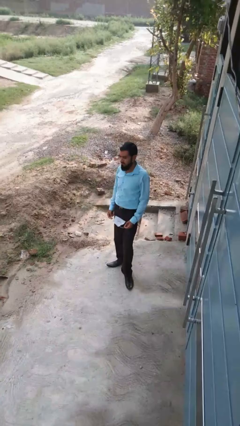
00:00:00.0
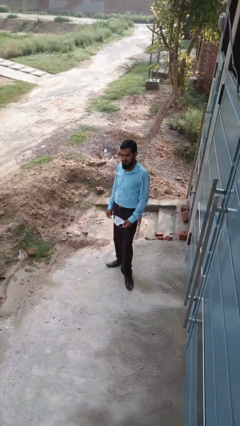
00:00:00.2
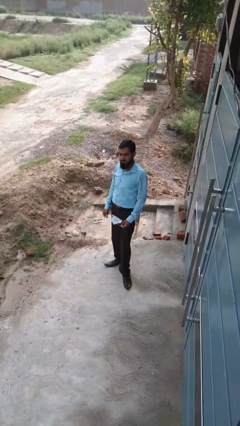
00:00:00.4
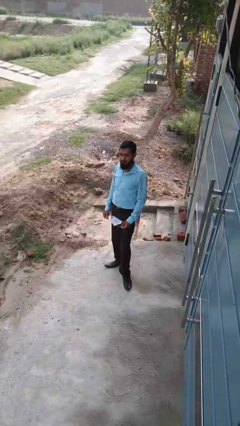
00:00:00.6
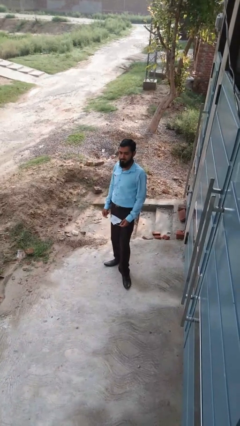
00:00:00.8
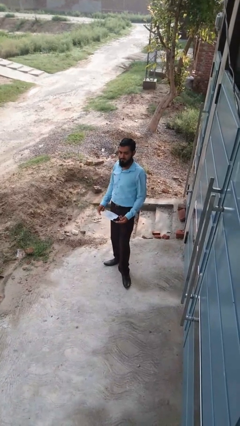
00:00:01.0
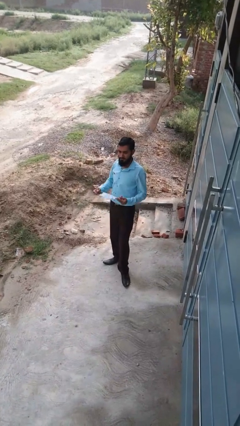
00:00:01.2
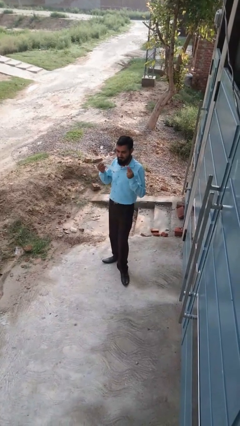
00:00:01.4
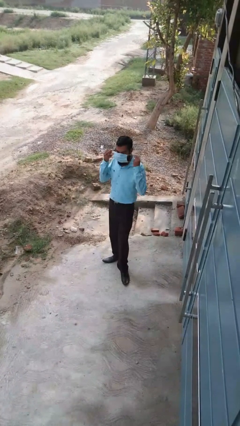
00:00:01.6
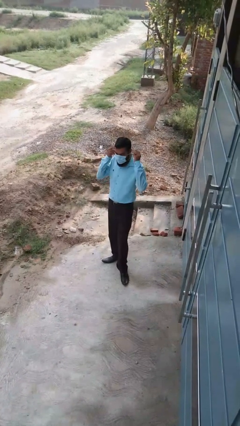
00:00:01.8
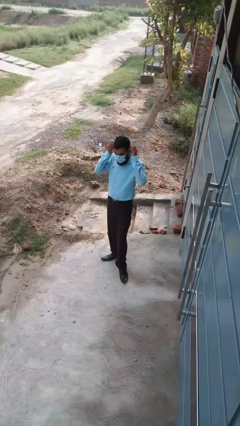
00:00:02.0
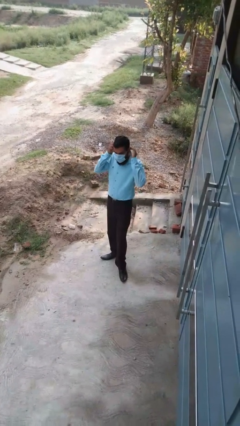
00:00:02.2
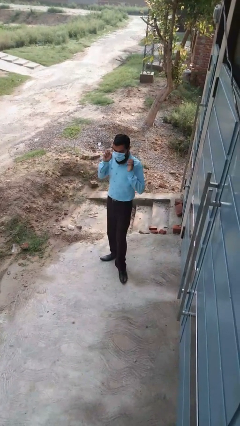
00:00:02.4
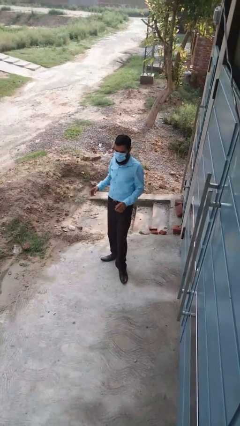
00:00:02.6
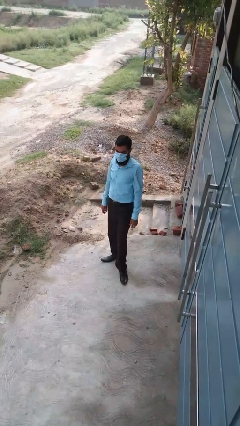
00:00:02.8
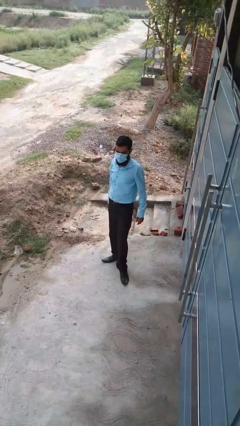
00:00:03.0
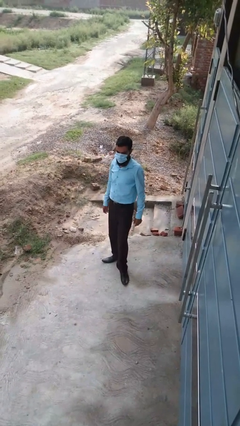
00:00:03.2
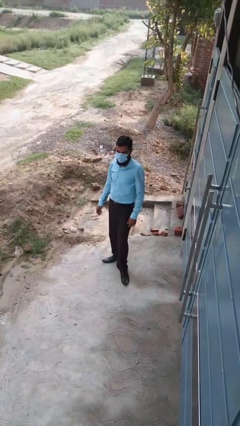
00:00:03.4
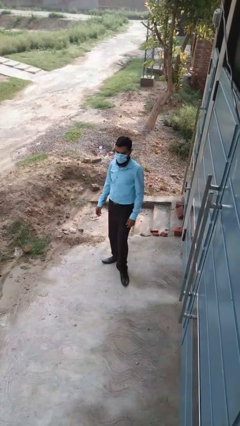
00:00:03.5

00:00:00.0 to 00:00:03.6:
person puts on facemask

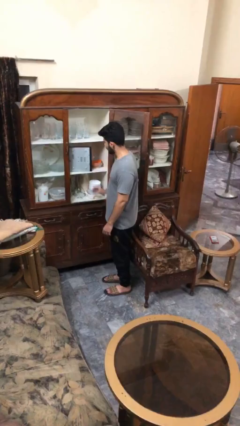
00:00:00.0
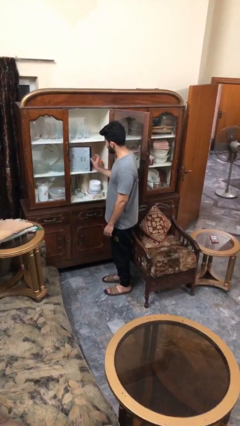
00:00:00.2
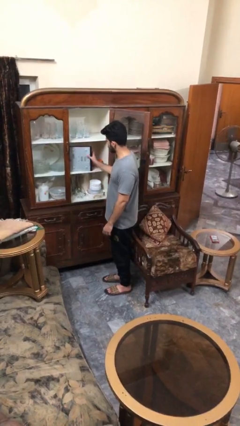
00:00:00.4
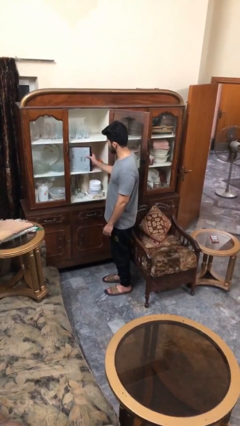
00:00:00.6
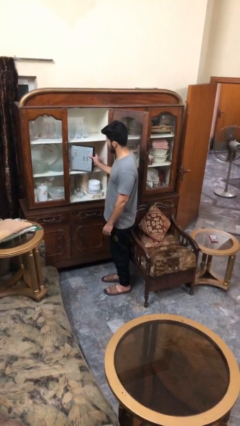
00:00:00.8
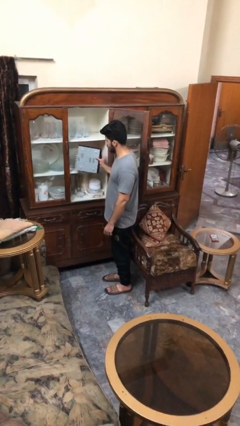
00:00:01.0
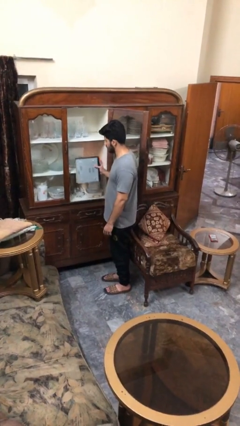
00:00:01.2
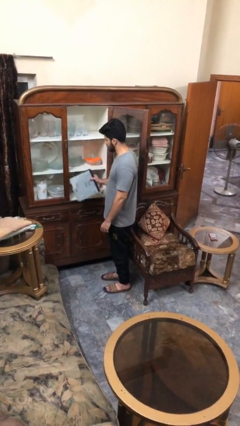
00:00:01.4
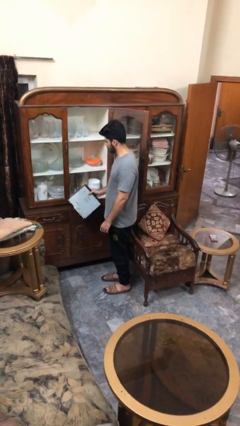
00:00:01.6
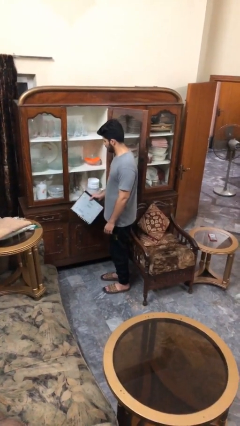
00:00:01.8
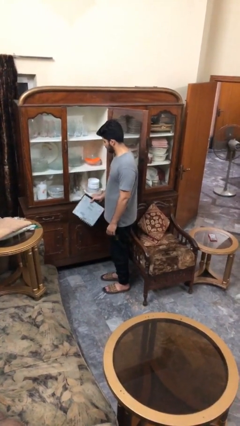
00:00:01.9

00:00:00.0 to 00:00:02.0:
person picks up object from cabinet

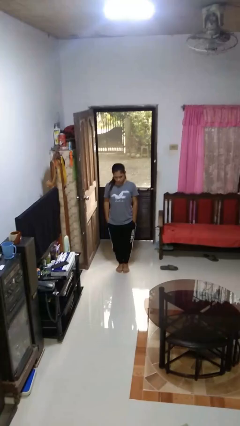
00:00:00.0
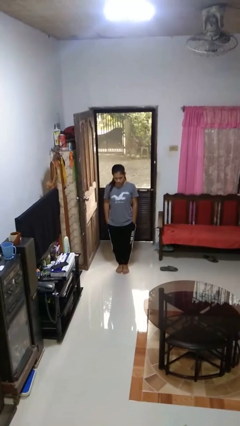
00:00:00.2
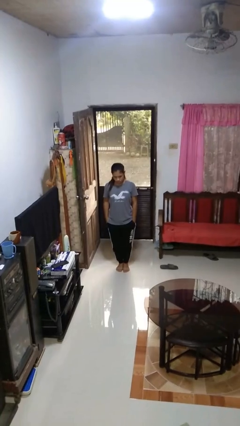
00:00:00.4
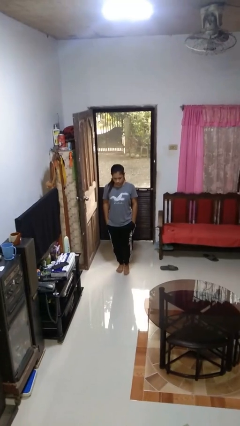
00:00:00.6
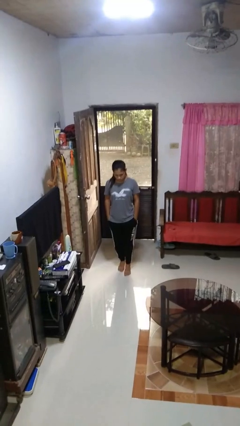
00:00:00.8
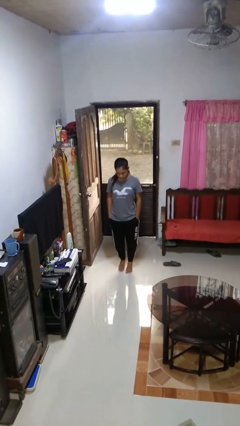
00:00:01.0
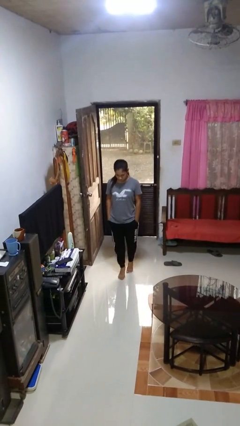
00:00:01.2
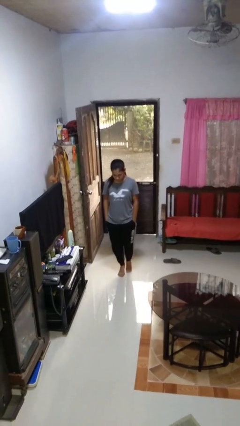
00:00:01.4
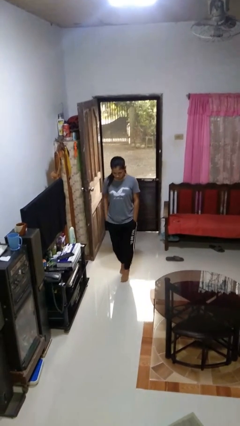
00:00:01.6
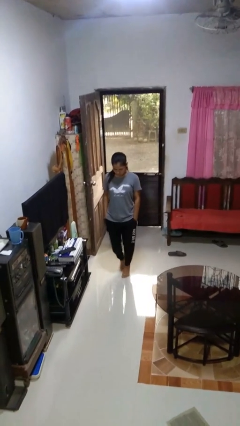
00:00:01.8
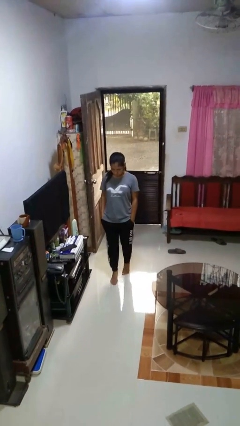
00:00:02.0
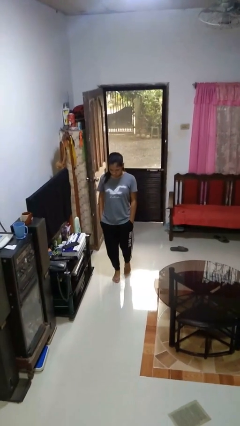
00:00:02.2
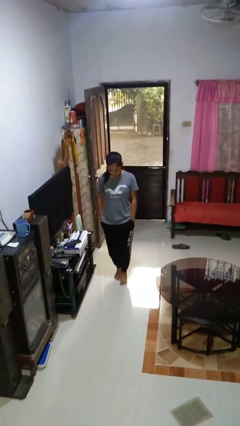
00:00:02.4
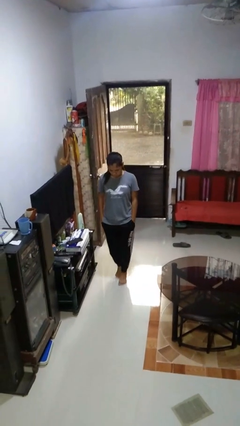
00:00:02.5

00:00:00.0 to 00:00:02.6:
person walks tiptoe

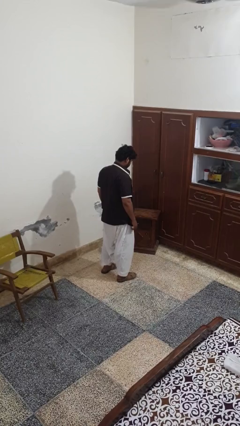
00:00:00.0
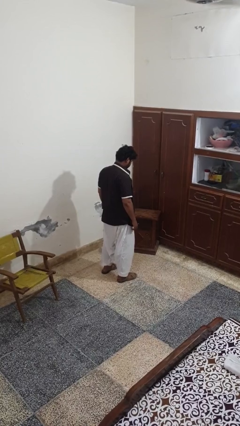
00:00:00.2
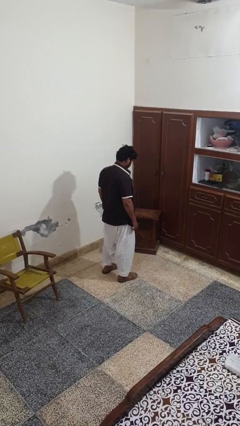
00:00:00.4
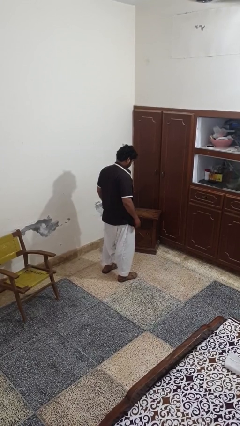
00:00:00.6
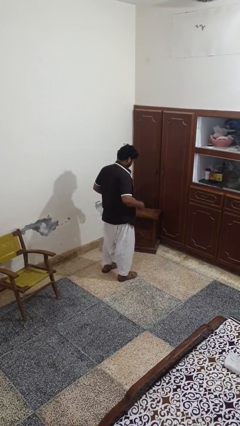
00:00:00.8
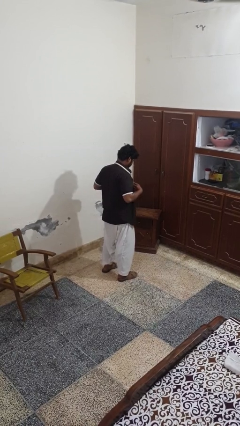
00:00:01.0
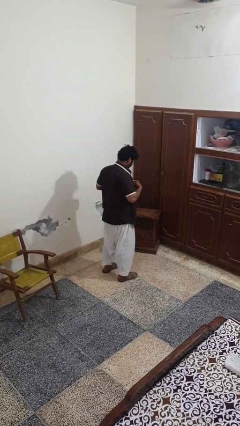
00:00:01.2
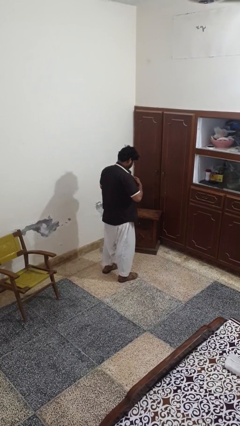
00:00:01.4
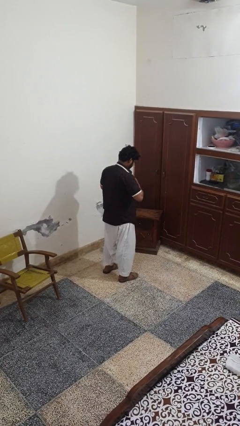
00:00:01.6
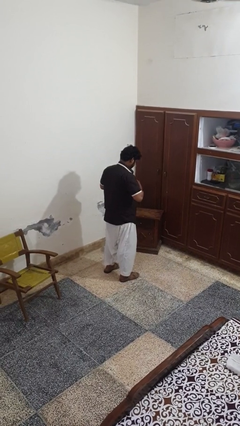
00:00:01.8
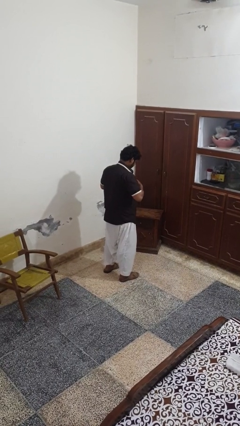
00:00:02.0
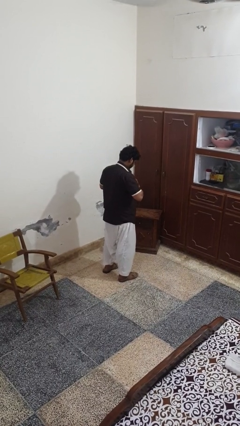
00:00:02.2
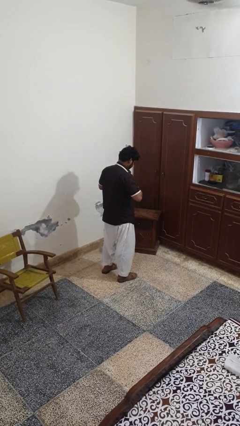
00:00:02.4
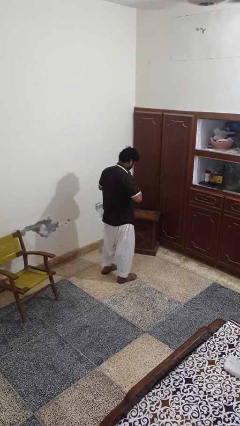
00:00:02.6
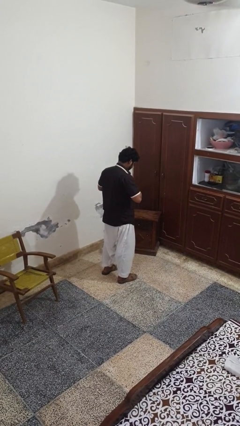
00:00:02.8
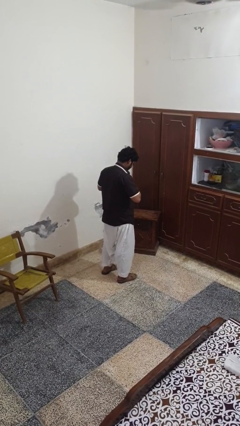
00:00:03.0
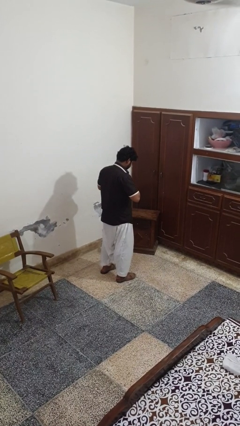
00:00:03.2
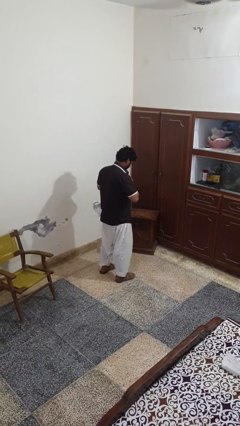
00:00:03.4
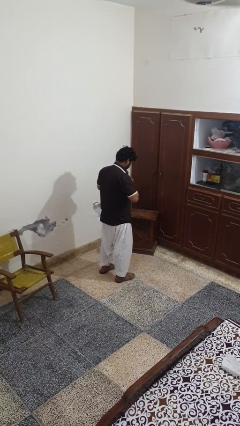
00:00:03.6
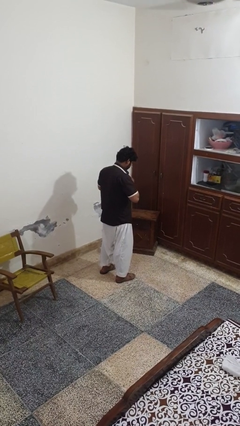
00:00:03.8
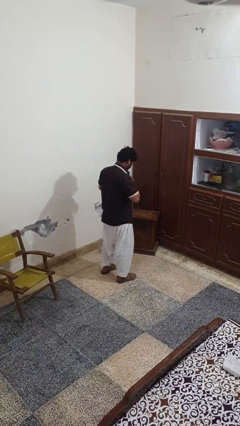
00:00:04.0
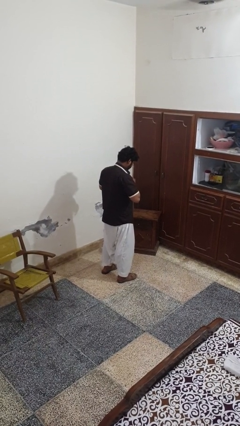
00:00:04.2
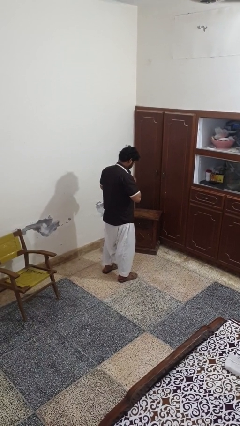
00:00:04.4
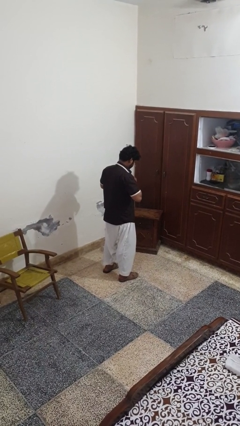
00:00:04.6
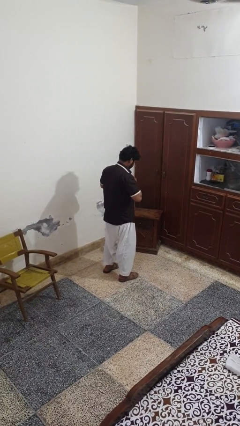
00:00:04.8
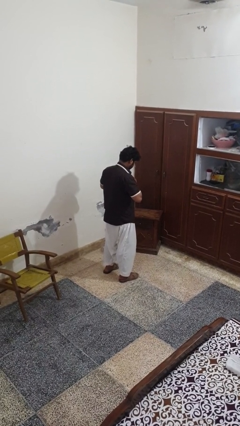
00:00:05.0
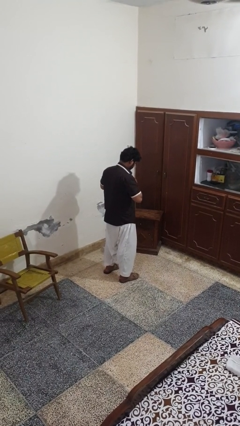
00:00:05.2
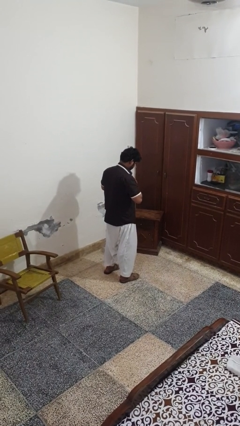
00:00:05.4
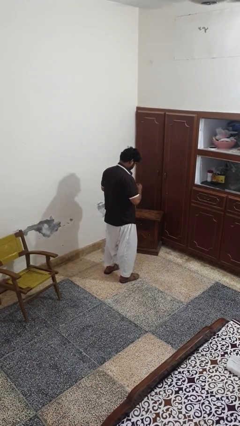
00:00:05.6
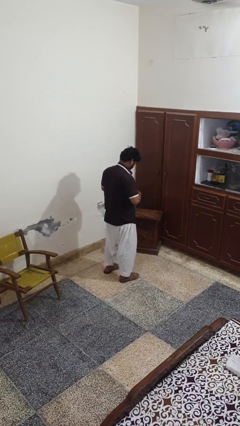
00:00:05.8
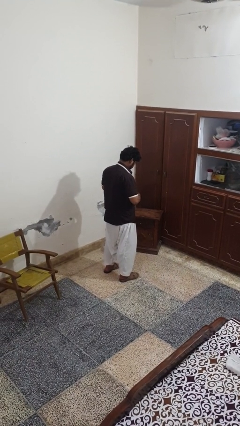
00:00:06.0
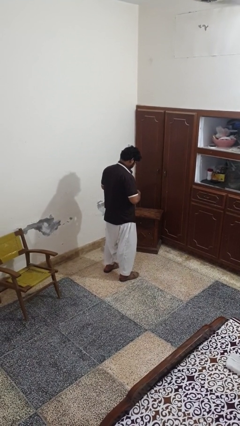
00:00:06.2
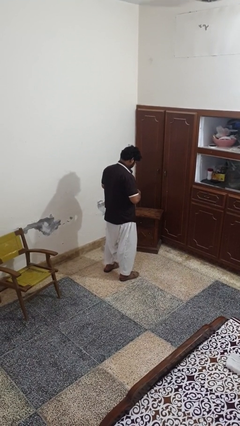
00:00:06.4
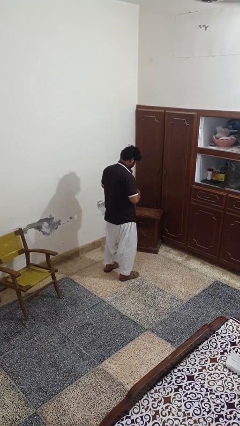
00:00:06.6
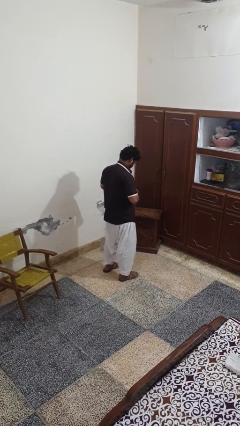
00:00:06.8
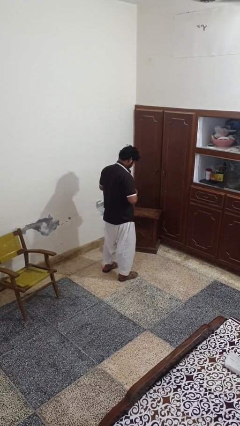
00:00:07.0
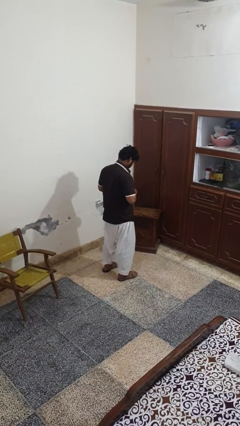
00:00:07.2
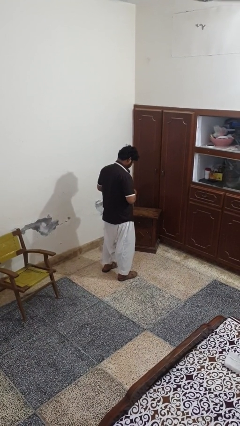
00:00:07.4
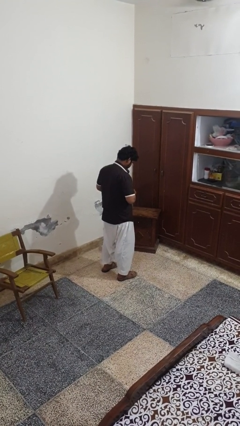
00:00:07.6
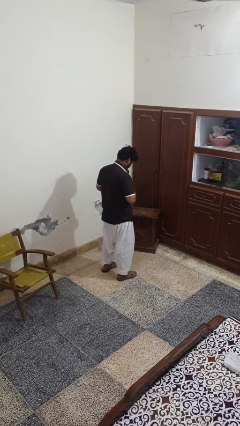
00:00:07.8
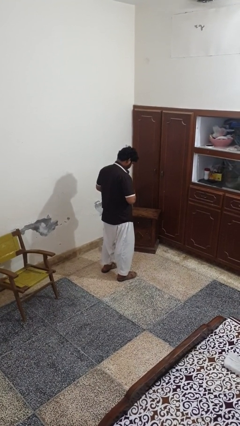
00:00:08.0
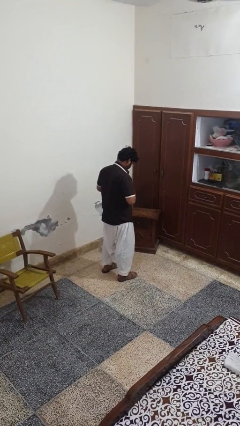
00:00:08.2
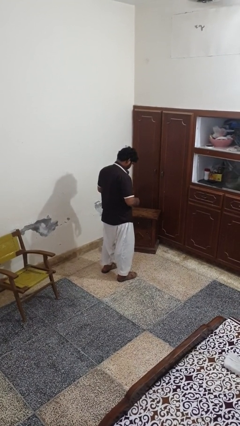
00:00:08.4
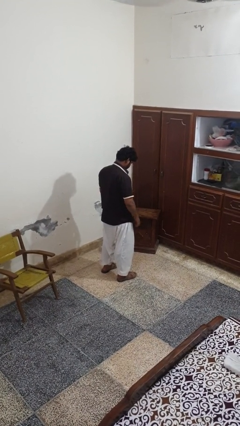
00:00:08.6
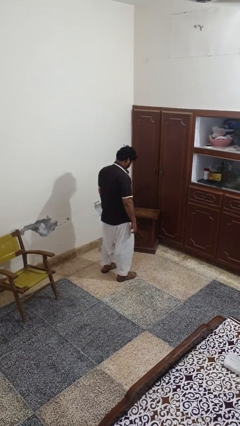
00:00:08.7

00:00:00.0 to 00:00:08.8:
person buttons shirt

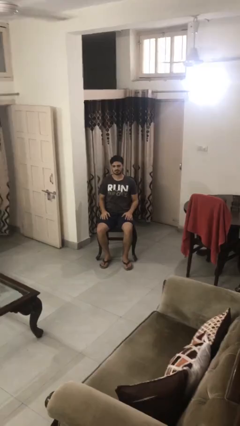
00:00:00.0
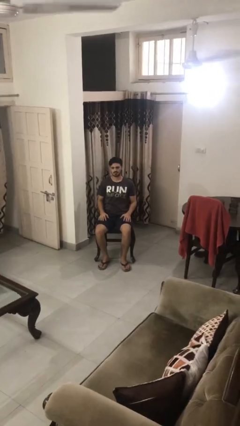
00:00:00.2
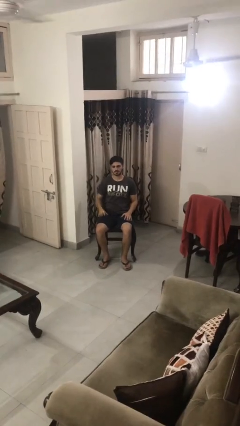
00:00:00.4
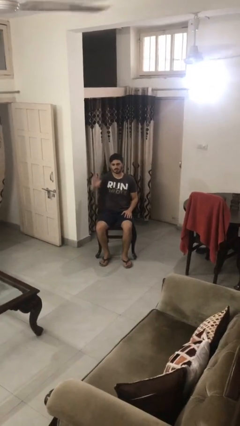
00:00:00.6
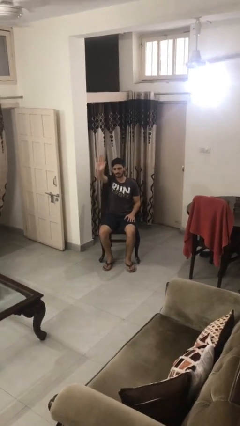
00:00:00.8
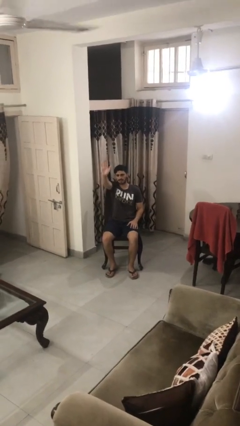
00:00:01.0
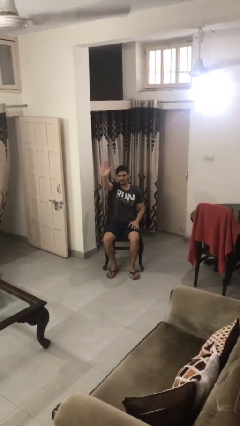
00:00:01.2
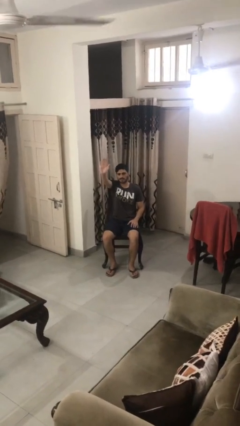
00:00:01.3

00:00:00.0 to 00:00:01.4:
person gestures raise hand
